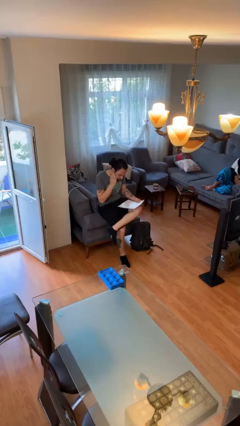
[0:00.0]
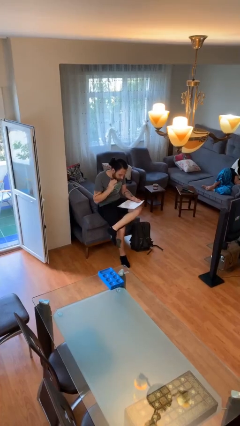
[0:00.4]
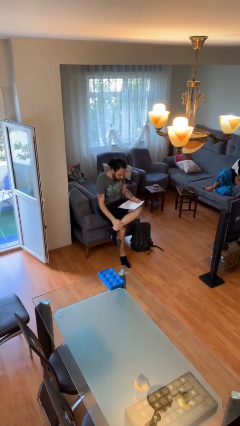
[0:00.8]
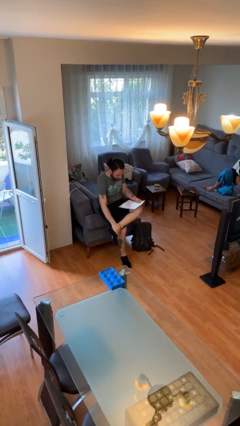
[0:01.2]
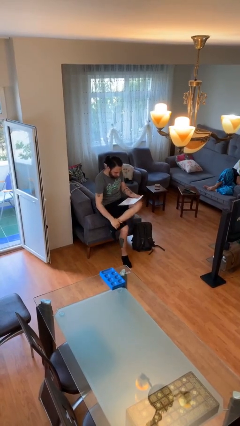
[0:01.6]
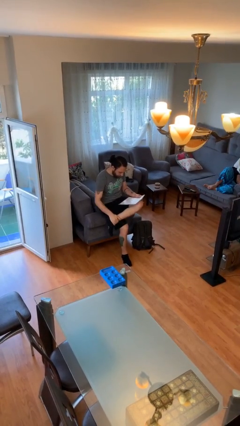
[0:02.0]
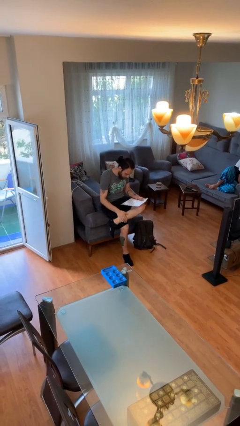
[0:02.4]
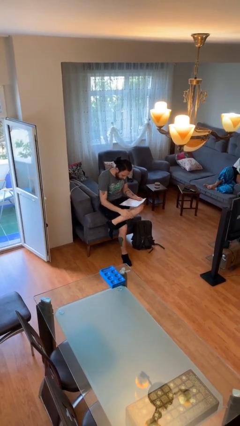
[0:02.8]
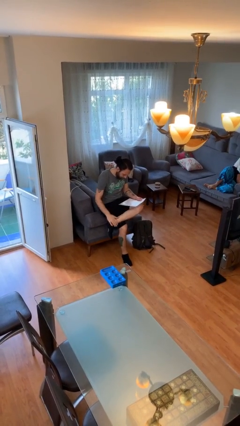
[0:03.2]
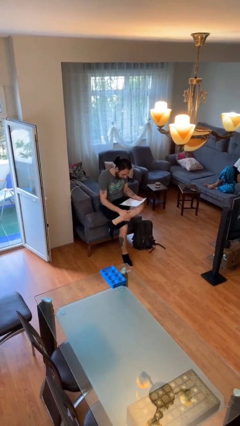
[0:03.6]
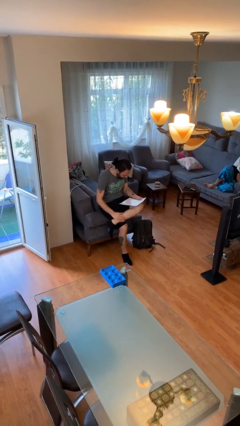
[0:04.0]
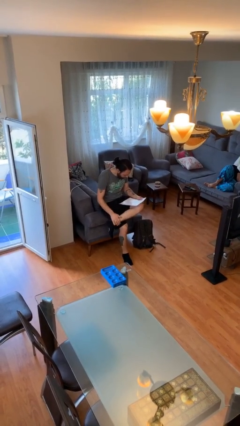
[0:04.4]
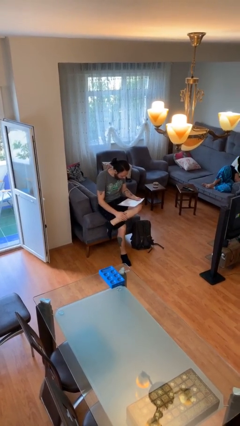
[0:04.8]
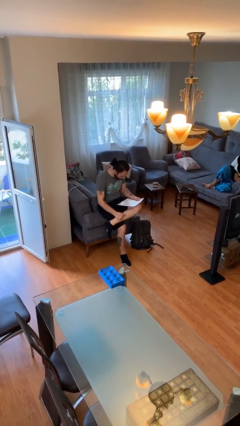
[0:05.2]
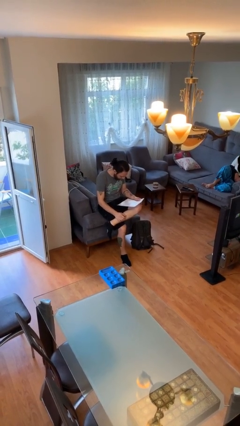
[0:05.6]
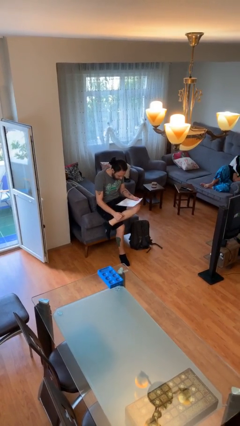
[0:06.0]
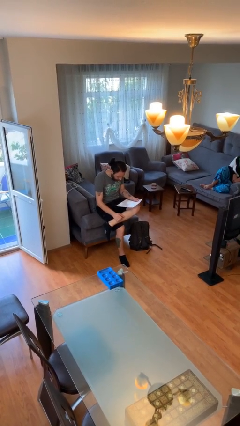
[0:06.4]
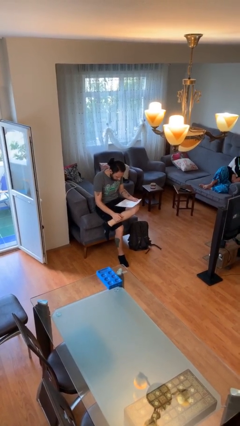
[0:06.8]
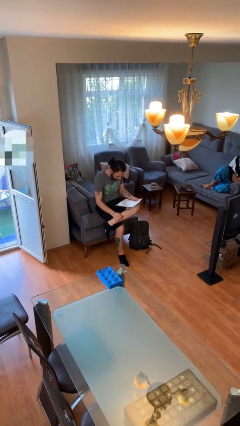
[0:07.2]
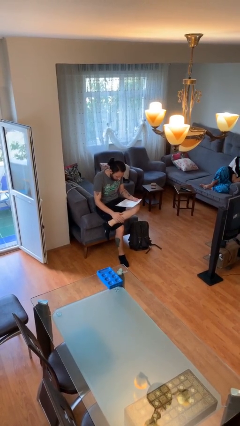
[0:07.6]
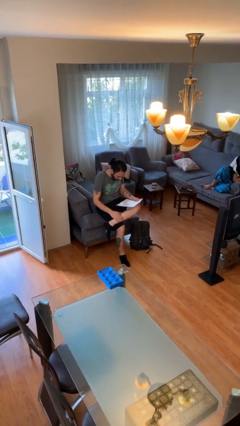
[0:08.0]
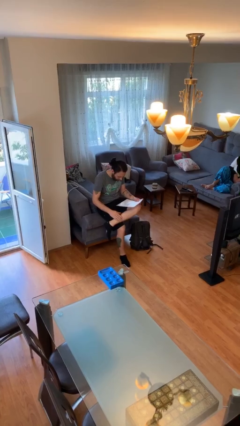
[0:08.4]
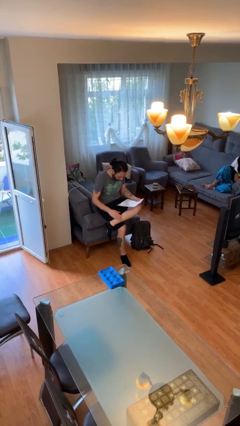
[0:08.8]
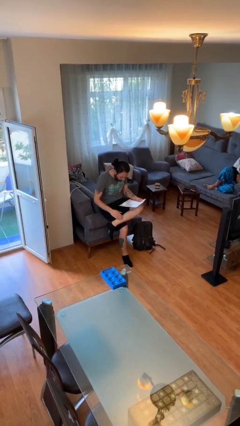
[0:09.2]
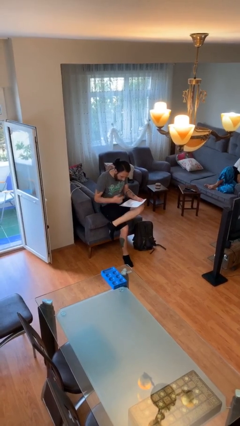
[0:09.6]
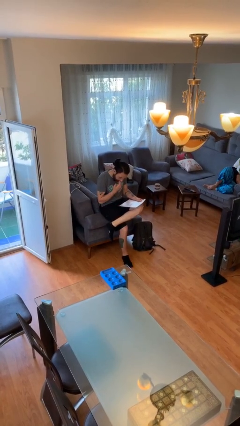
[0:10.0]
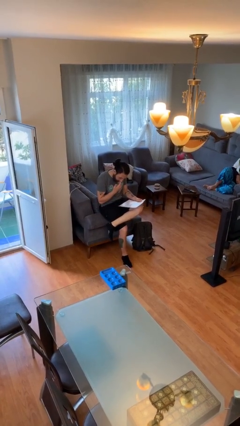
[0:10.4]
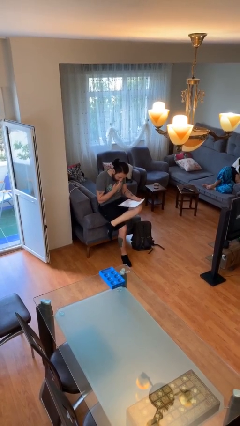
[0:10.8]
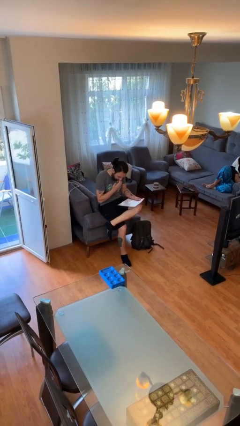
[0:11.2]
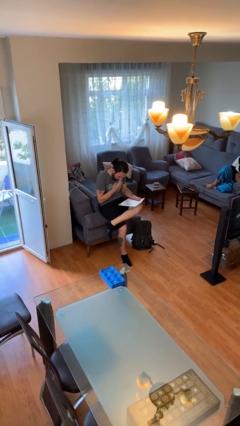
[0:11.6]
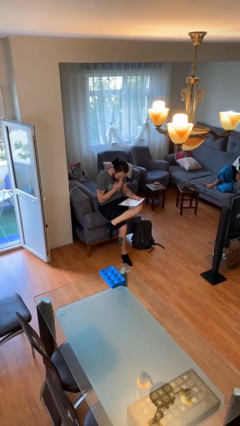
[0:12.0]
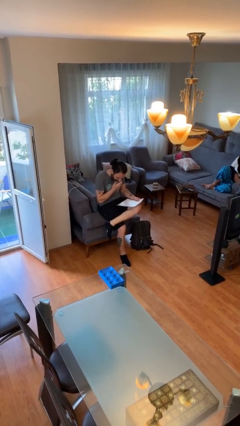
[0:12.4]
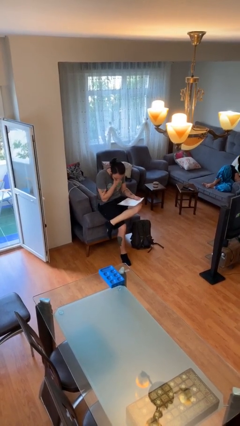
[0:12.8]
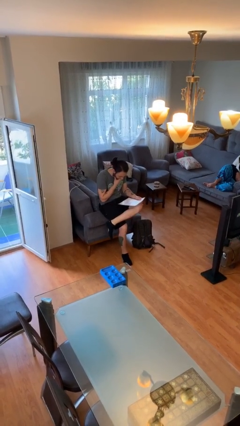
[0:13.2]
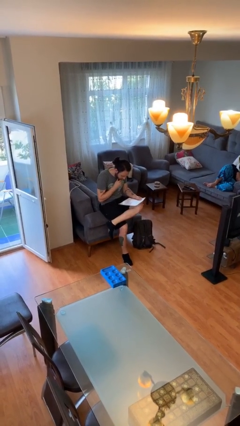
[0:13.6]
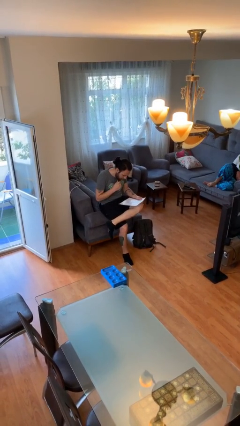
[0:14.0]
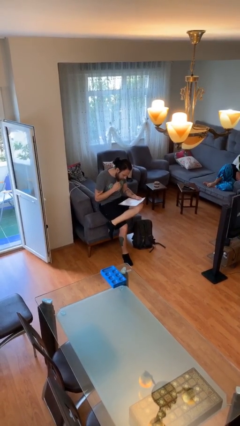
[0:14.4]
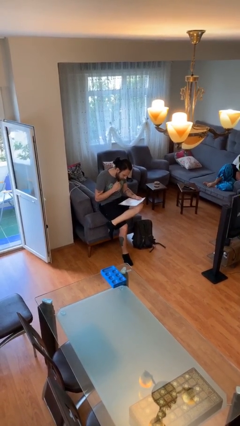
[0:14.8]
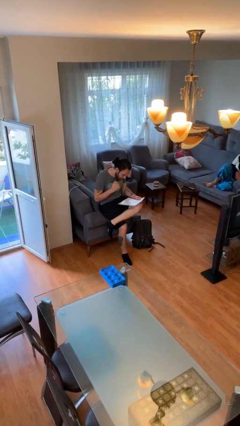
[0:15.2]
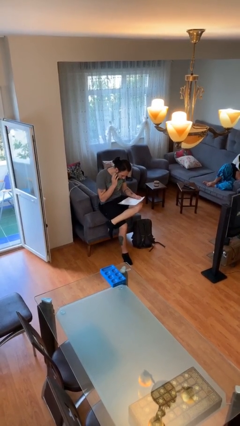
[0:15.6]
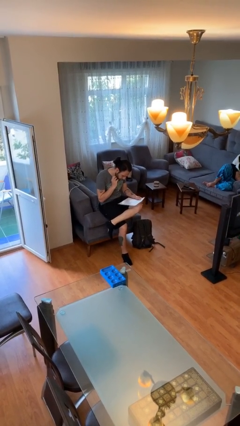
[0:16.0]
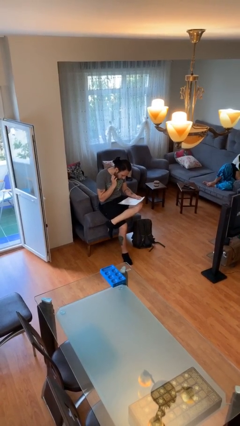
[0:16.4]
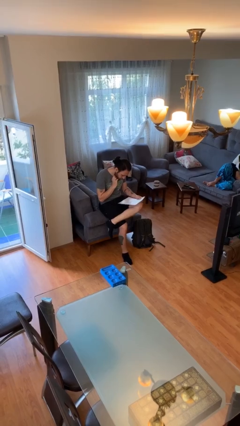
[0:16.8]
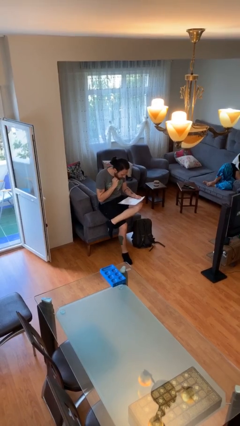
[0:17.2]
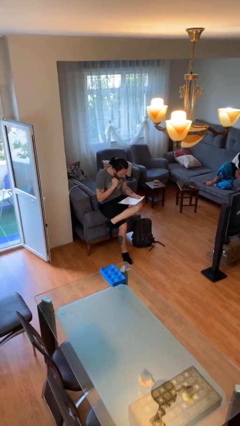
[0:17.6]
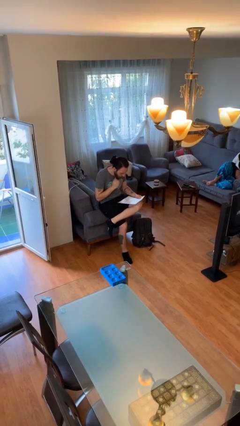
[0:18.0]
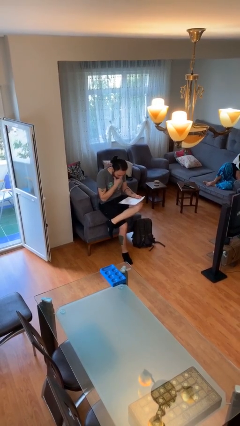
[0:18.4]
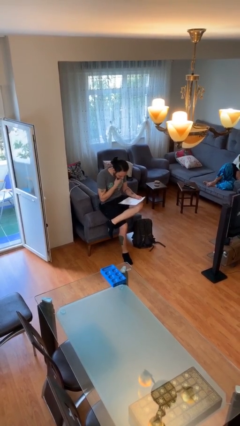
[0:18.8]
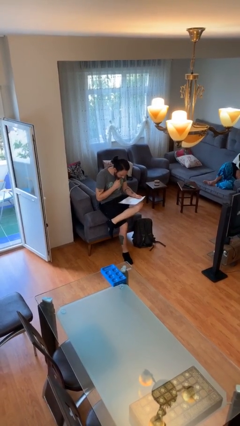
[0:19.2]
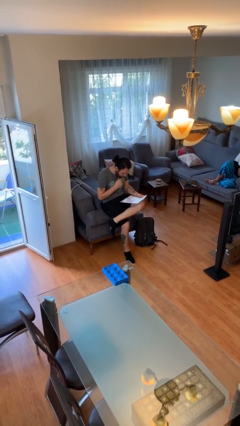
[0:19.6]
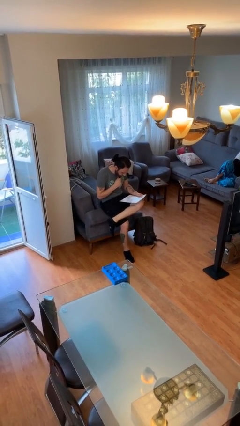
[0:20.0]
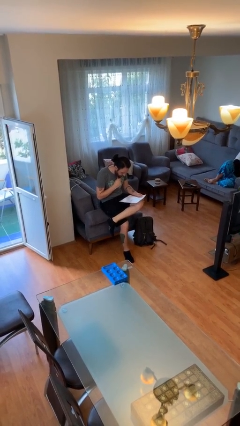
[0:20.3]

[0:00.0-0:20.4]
person reads document

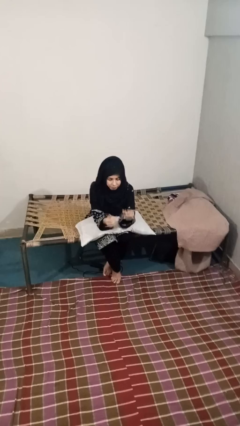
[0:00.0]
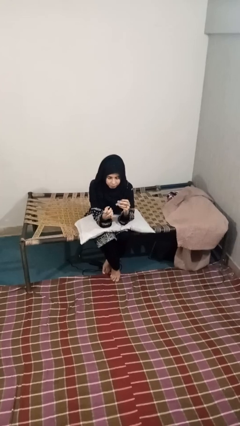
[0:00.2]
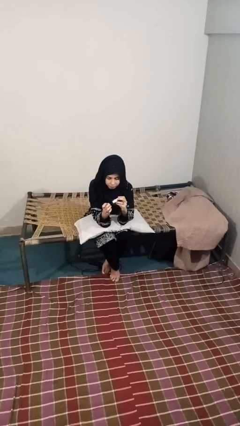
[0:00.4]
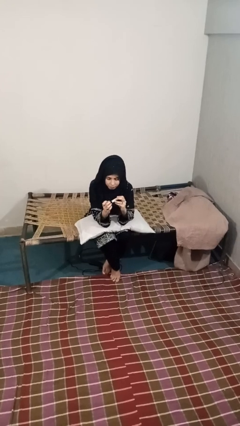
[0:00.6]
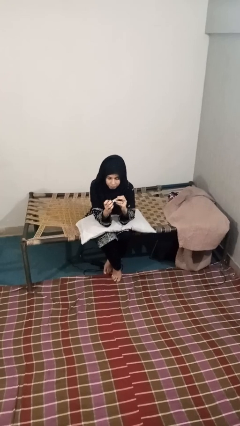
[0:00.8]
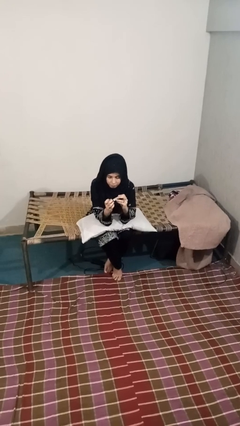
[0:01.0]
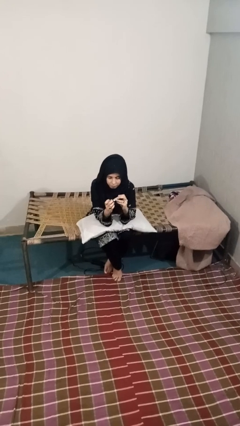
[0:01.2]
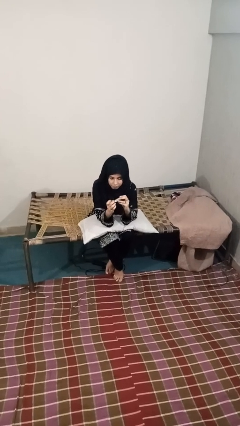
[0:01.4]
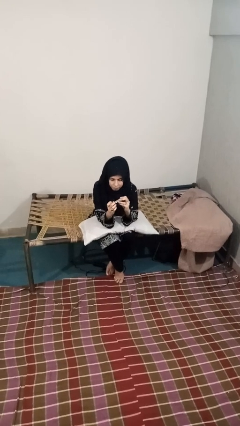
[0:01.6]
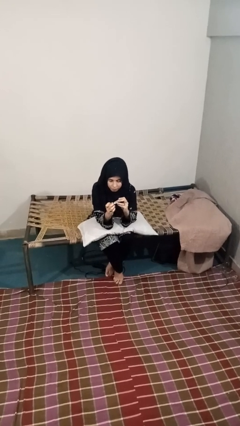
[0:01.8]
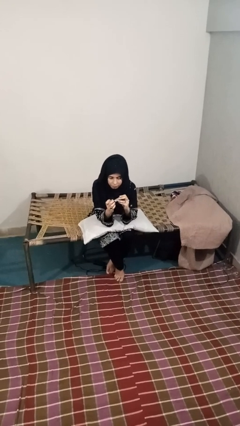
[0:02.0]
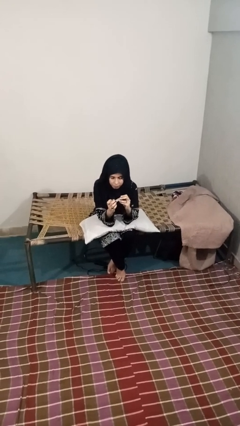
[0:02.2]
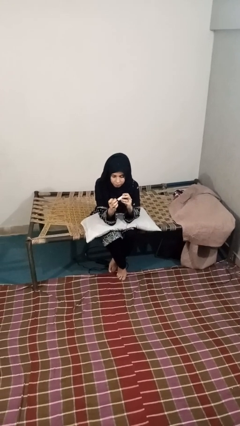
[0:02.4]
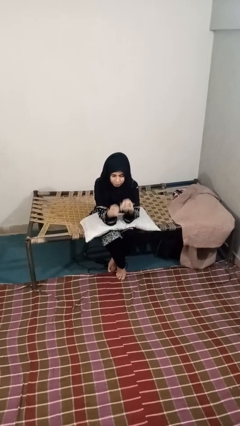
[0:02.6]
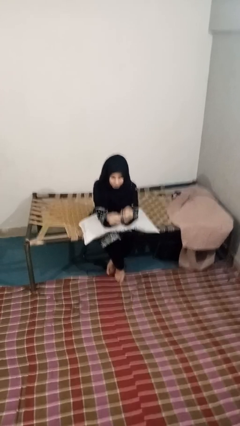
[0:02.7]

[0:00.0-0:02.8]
person clips fingernails

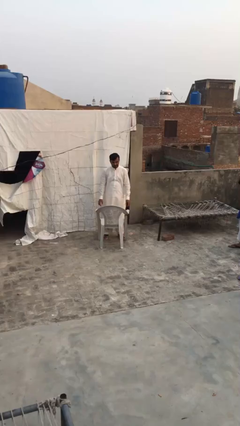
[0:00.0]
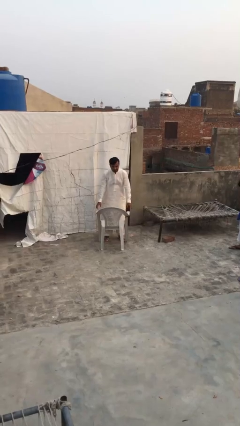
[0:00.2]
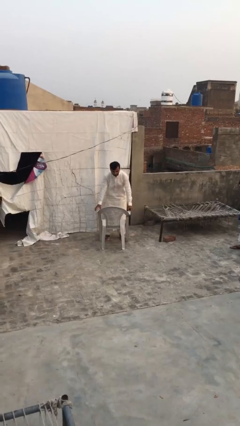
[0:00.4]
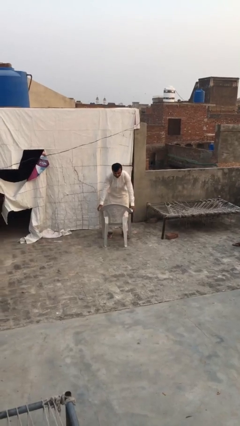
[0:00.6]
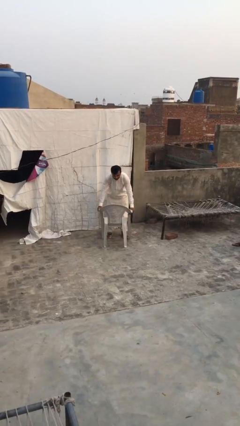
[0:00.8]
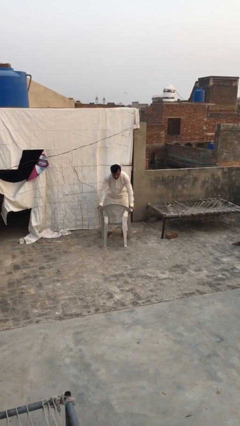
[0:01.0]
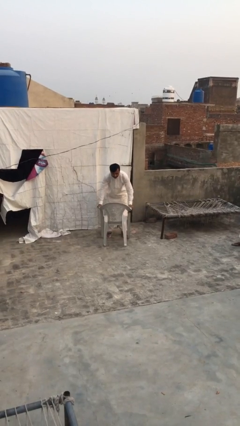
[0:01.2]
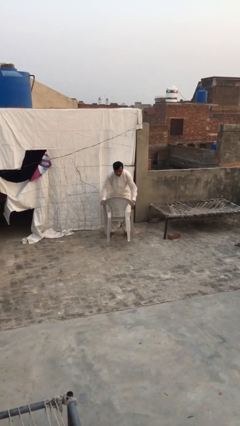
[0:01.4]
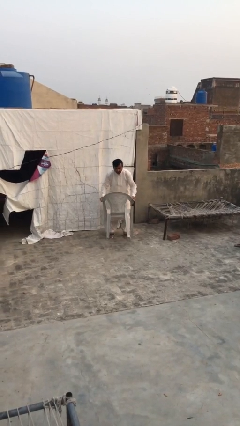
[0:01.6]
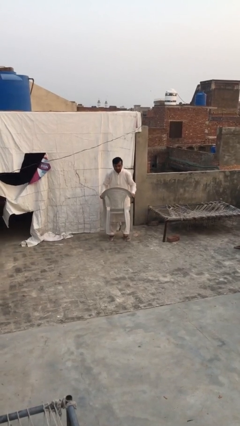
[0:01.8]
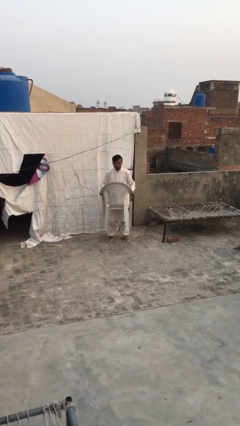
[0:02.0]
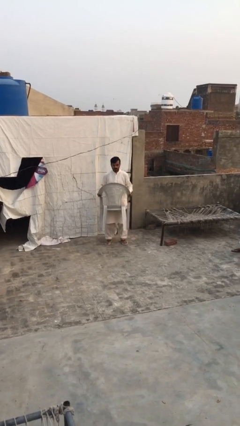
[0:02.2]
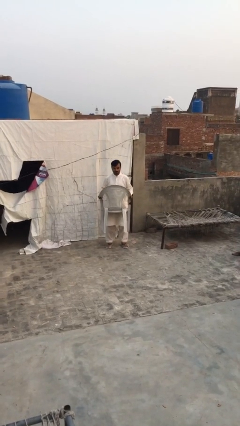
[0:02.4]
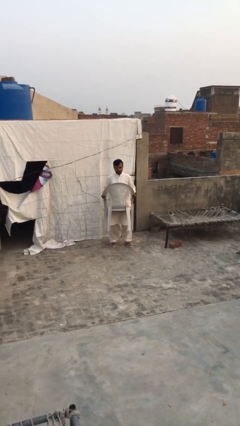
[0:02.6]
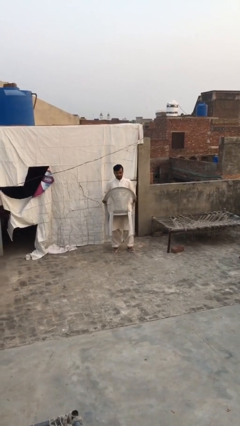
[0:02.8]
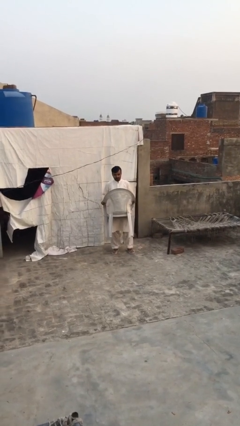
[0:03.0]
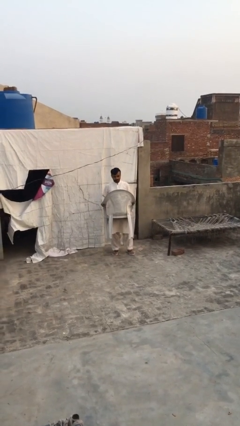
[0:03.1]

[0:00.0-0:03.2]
person picks up object from floor

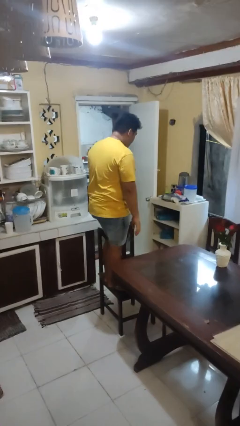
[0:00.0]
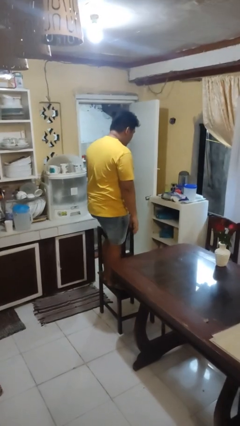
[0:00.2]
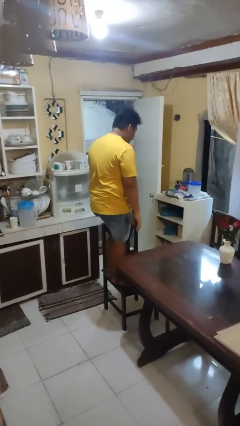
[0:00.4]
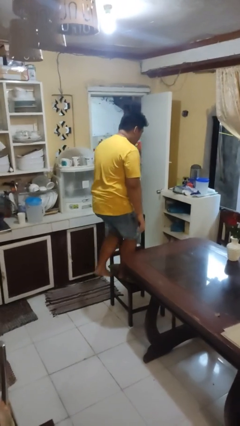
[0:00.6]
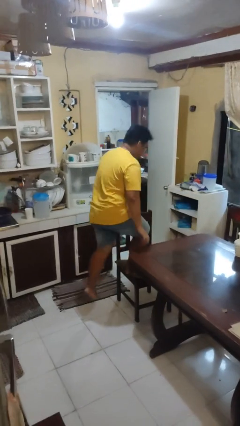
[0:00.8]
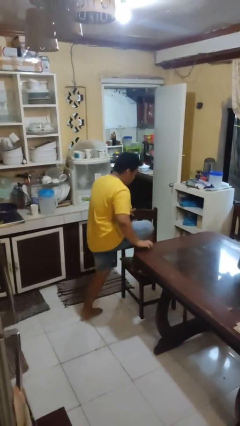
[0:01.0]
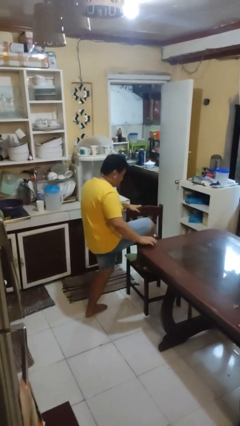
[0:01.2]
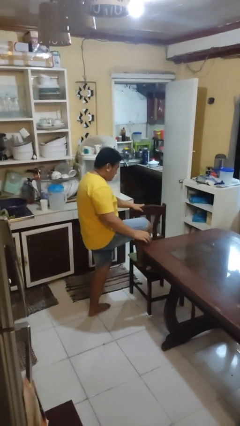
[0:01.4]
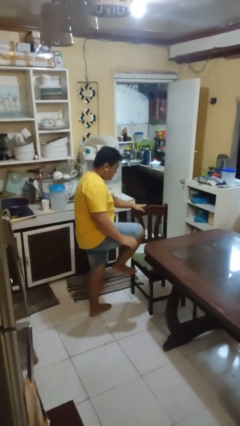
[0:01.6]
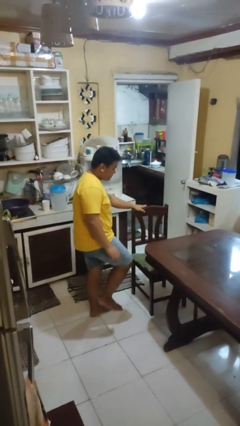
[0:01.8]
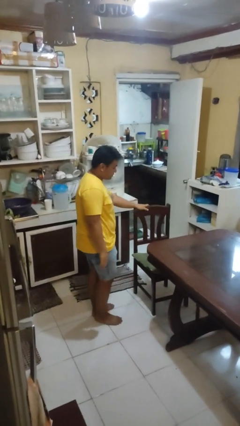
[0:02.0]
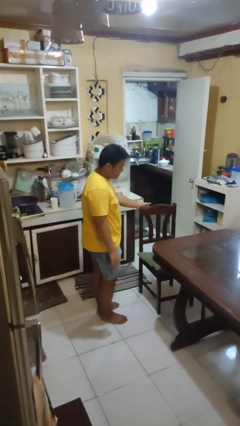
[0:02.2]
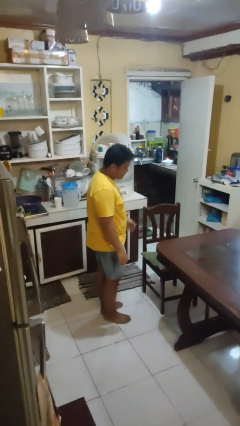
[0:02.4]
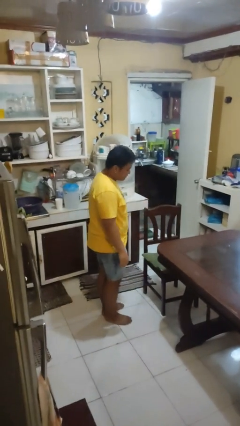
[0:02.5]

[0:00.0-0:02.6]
person climbs off chair
